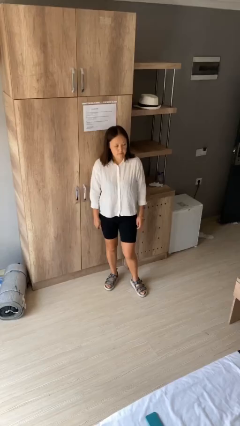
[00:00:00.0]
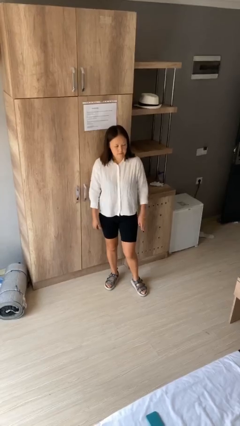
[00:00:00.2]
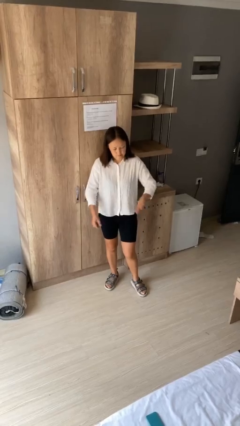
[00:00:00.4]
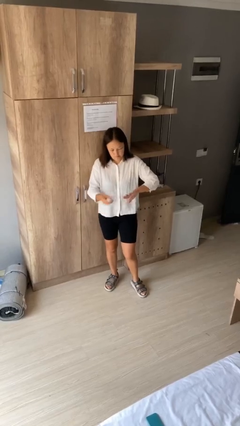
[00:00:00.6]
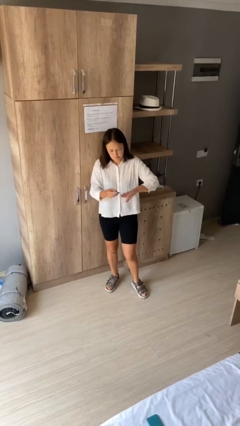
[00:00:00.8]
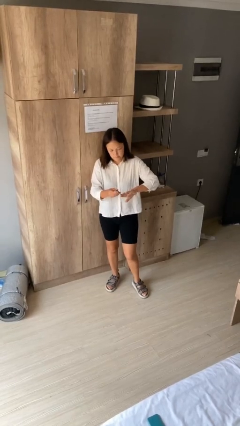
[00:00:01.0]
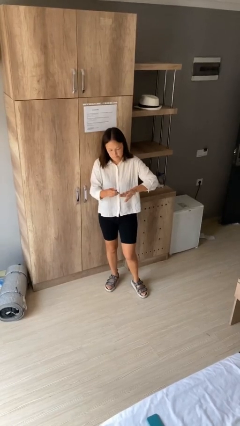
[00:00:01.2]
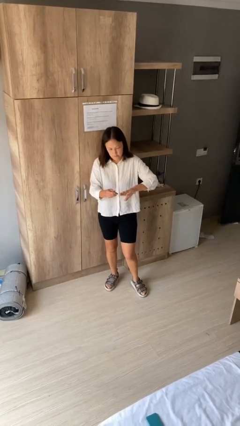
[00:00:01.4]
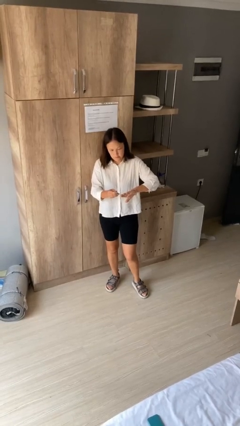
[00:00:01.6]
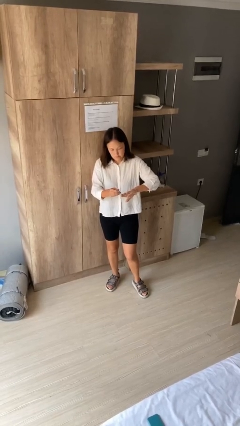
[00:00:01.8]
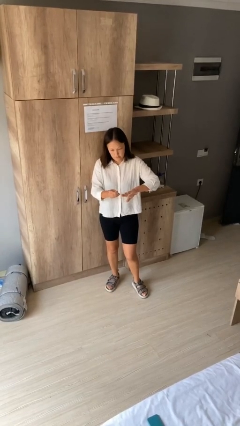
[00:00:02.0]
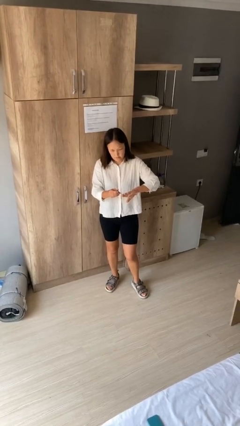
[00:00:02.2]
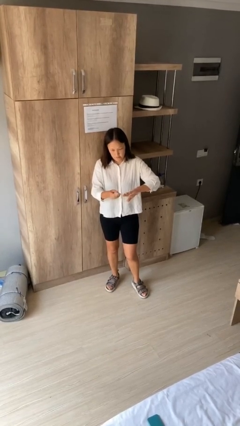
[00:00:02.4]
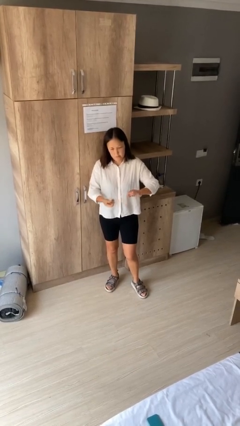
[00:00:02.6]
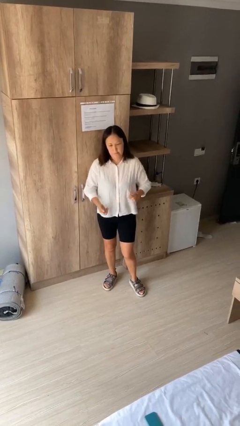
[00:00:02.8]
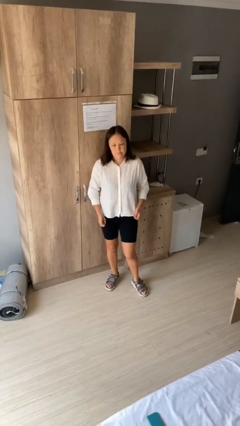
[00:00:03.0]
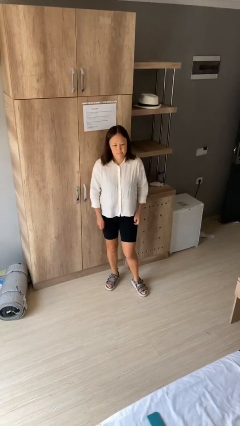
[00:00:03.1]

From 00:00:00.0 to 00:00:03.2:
person clips fingernails

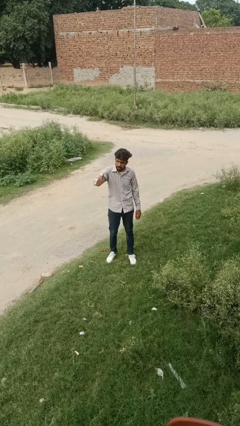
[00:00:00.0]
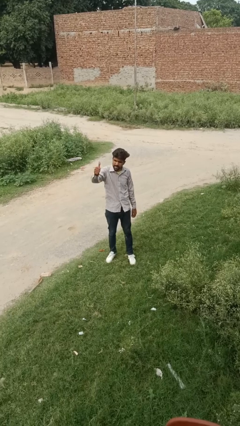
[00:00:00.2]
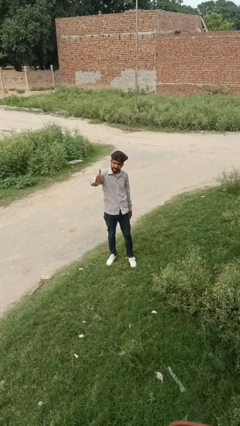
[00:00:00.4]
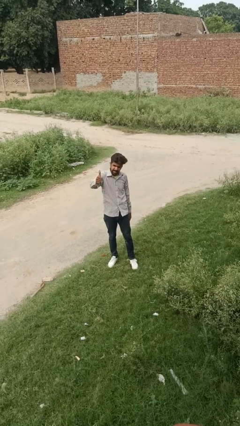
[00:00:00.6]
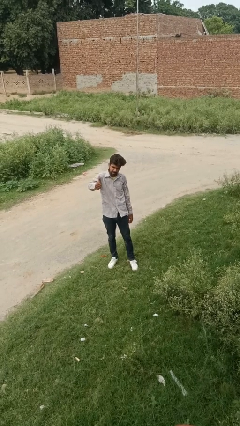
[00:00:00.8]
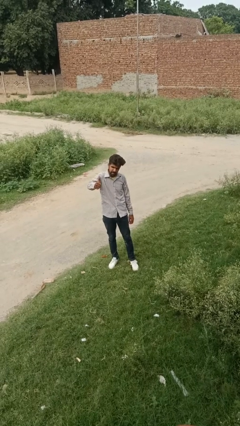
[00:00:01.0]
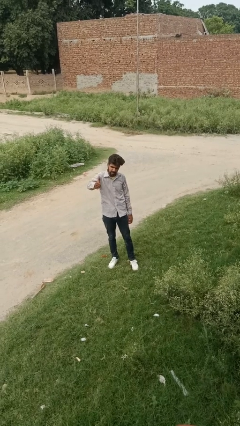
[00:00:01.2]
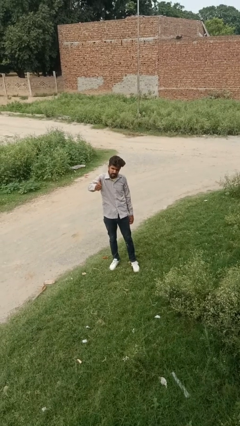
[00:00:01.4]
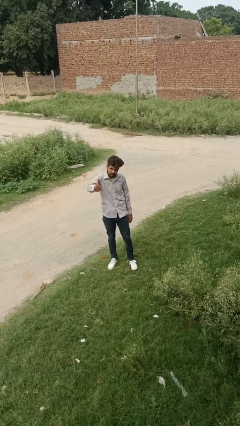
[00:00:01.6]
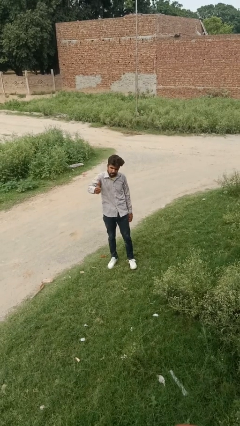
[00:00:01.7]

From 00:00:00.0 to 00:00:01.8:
person gestures thumbs up

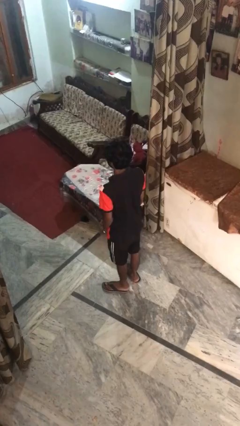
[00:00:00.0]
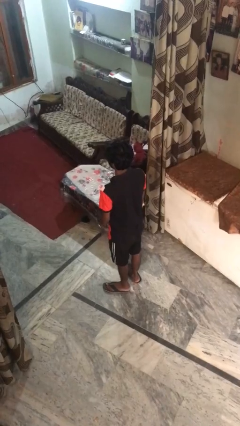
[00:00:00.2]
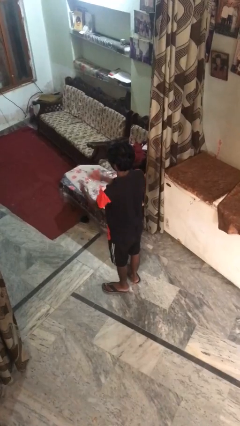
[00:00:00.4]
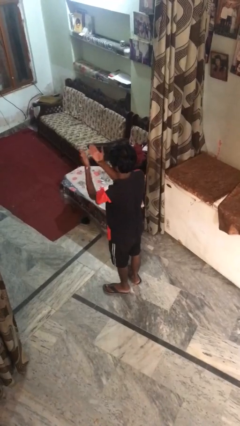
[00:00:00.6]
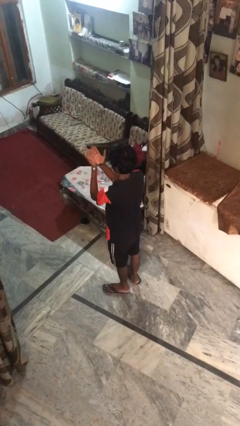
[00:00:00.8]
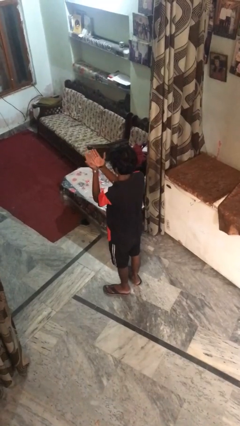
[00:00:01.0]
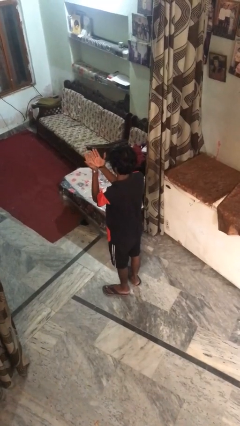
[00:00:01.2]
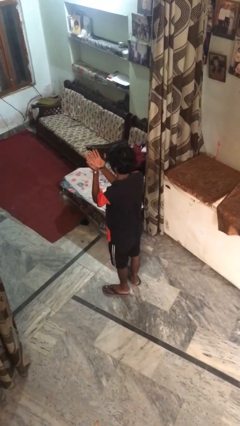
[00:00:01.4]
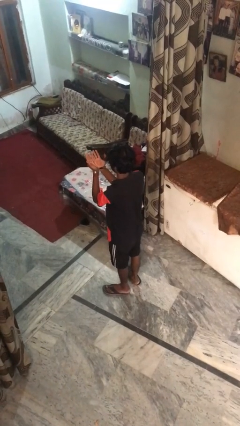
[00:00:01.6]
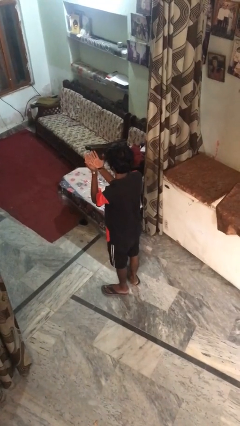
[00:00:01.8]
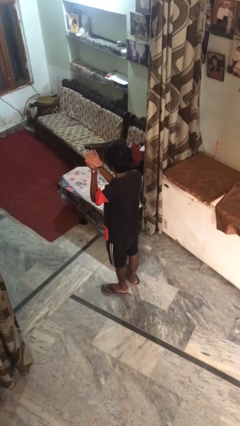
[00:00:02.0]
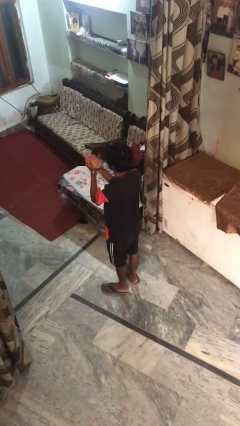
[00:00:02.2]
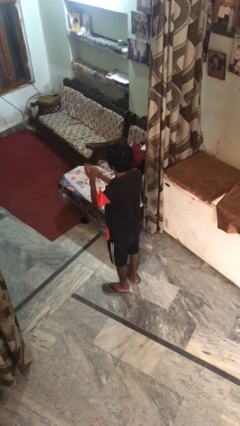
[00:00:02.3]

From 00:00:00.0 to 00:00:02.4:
person prays

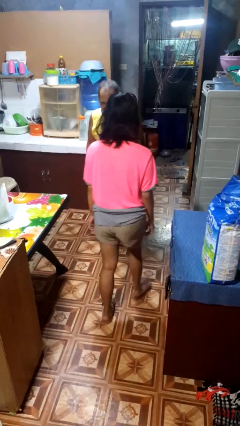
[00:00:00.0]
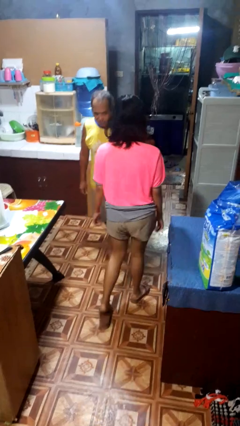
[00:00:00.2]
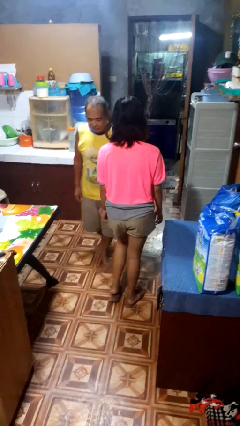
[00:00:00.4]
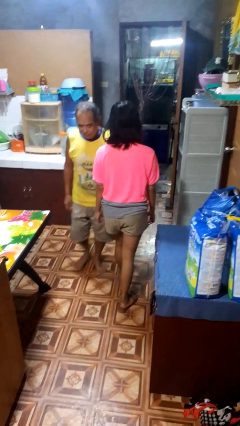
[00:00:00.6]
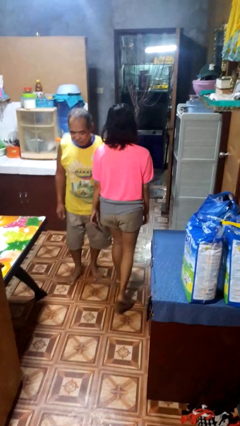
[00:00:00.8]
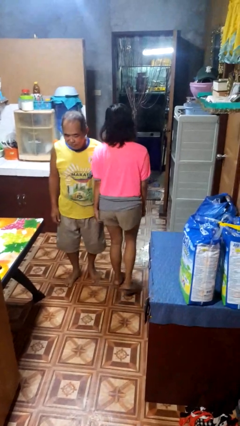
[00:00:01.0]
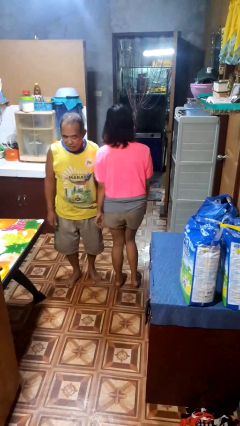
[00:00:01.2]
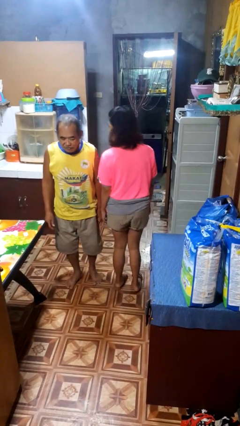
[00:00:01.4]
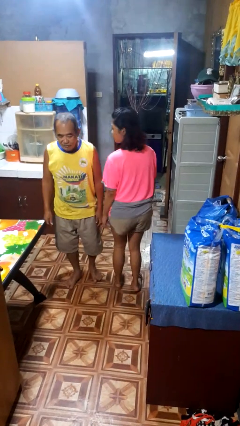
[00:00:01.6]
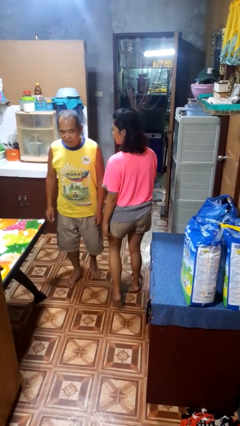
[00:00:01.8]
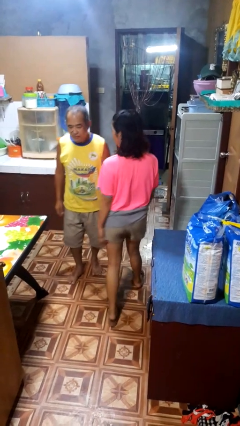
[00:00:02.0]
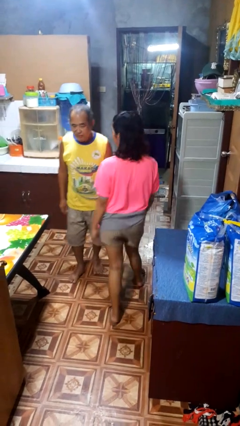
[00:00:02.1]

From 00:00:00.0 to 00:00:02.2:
person bumps into person

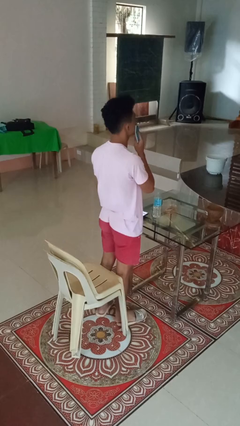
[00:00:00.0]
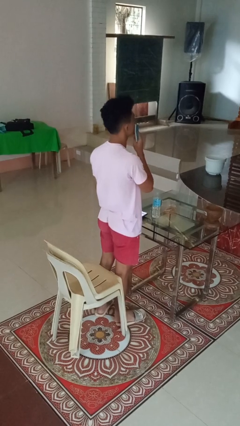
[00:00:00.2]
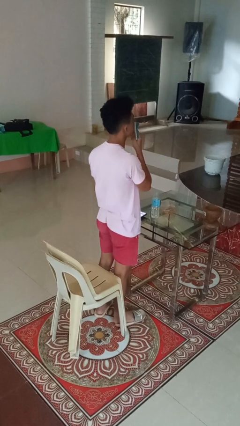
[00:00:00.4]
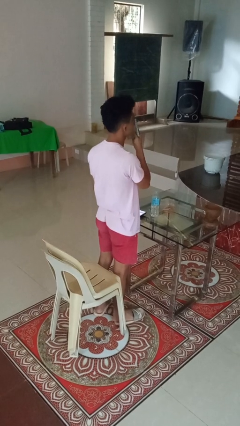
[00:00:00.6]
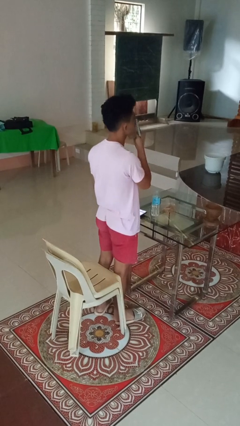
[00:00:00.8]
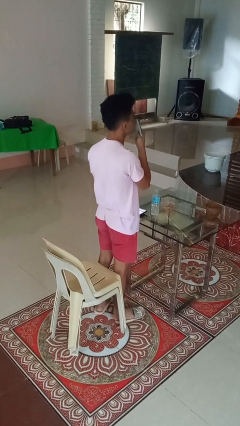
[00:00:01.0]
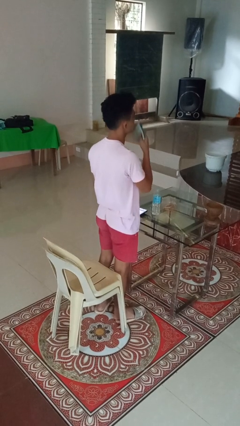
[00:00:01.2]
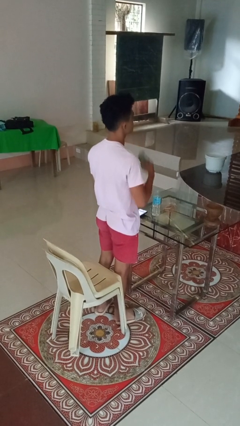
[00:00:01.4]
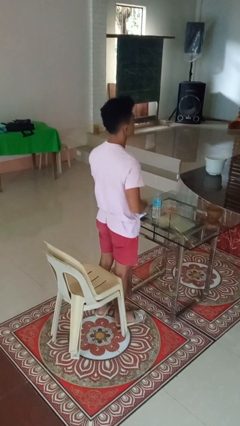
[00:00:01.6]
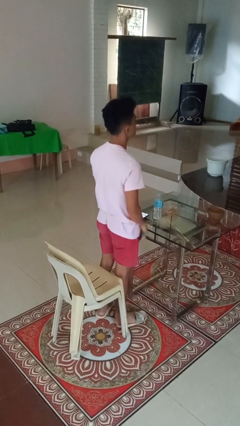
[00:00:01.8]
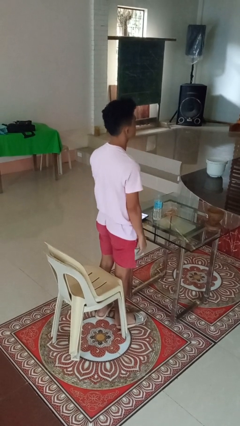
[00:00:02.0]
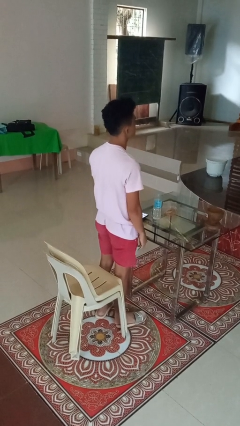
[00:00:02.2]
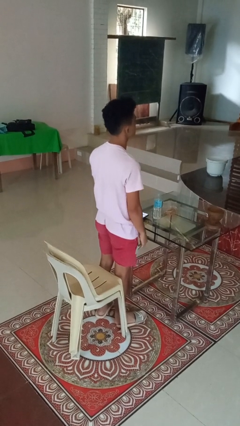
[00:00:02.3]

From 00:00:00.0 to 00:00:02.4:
person wipes mouth with napkin

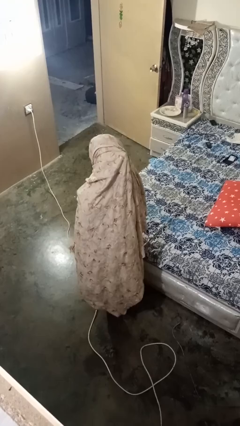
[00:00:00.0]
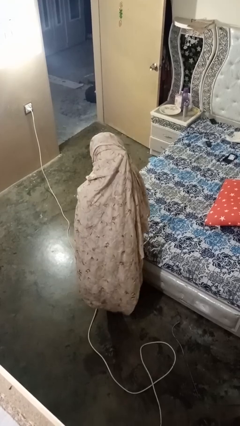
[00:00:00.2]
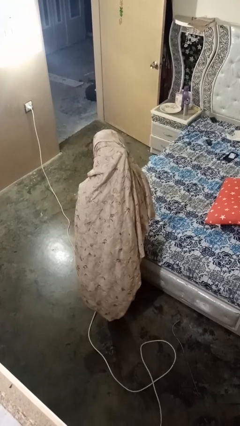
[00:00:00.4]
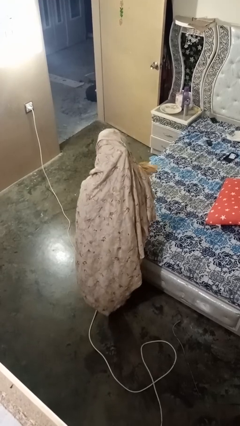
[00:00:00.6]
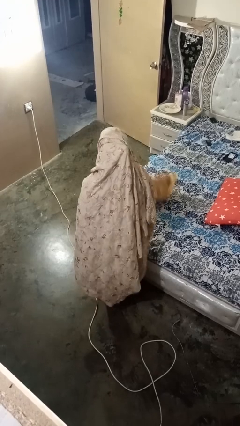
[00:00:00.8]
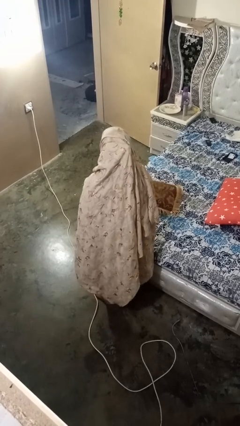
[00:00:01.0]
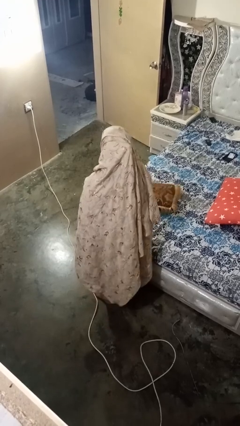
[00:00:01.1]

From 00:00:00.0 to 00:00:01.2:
person puts down object on bed

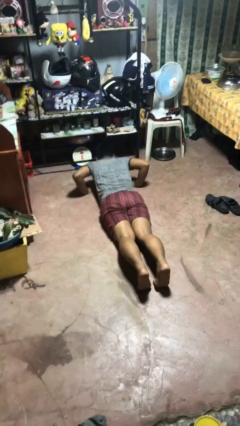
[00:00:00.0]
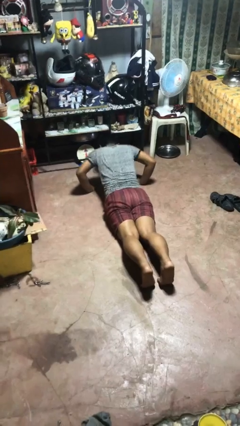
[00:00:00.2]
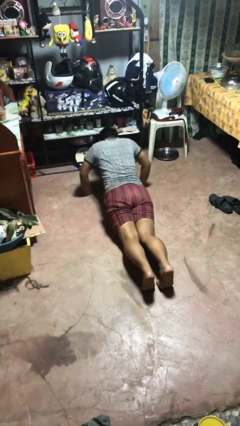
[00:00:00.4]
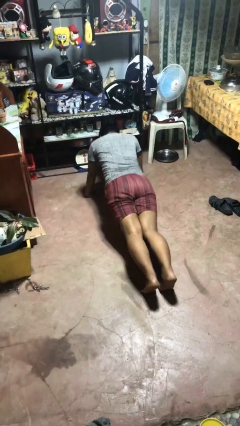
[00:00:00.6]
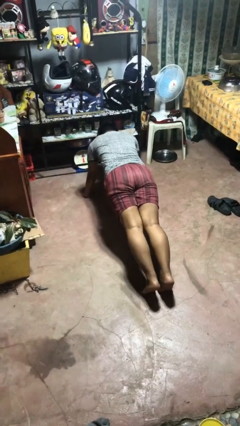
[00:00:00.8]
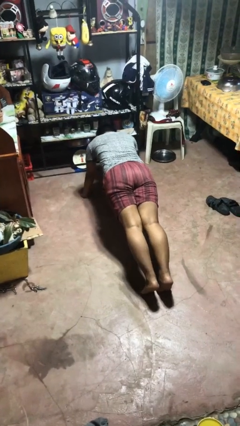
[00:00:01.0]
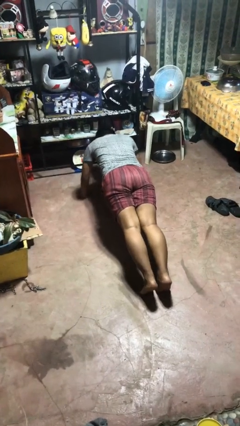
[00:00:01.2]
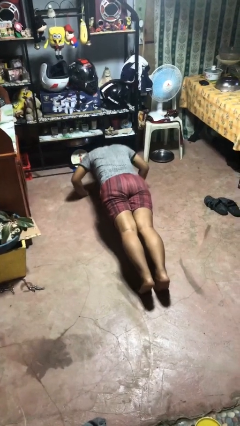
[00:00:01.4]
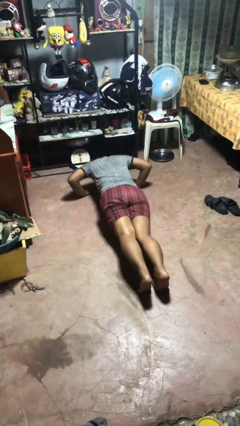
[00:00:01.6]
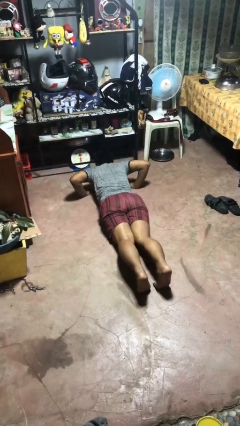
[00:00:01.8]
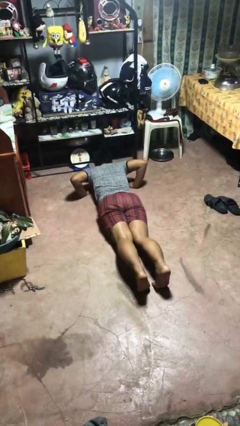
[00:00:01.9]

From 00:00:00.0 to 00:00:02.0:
person exercises with pushup

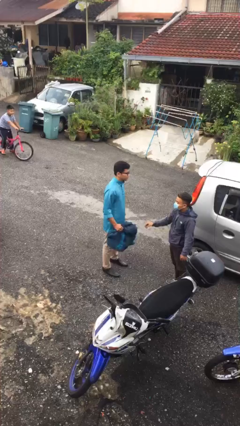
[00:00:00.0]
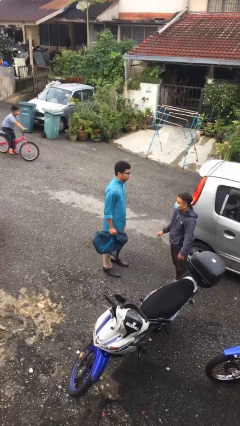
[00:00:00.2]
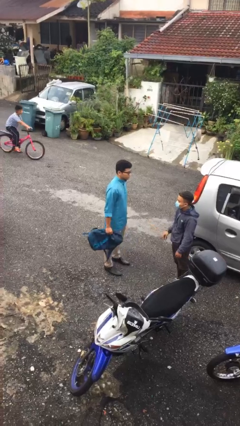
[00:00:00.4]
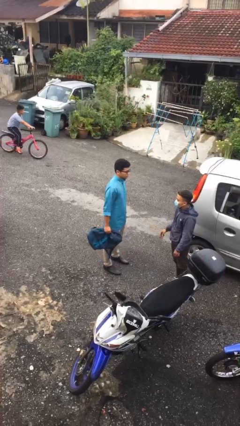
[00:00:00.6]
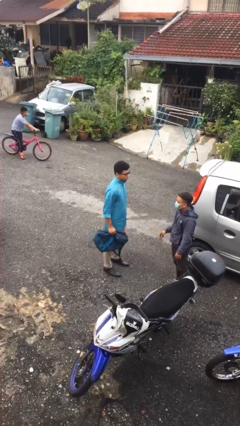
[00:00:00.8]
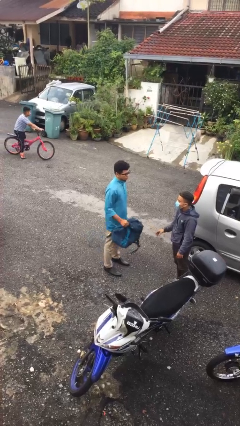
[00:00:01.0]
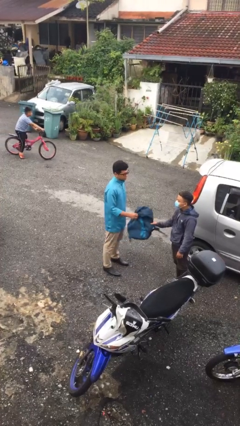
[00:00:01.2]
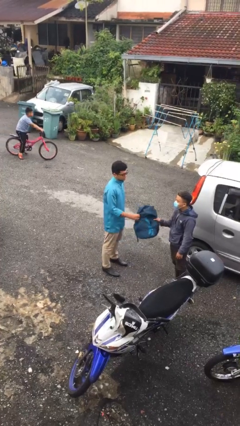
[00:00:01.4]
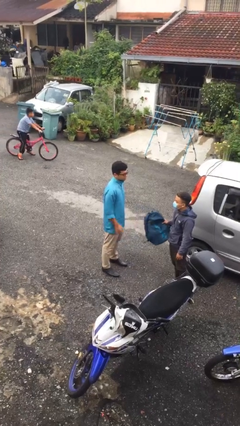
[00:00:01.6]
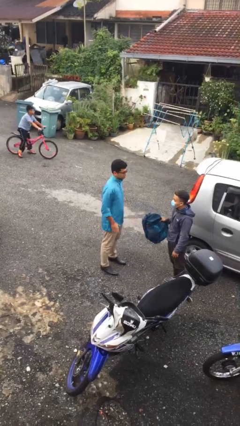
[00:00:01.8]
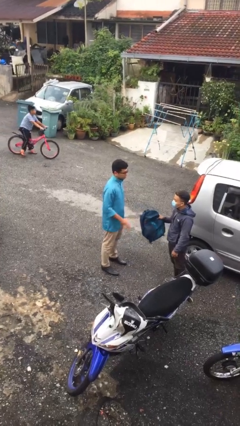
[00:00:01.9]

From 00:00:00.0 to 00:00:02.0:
person transfers object to person
